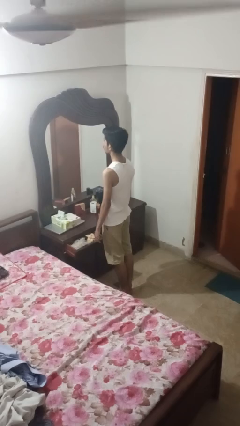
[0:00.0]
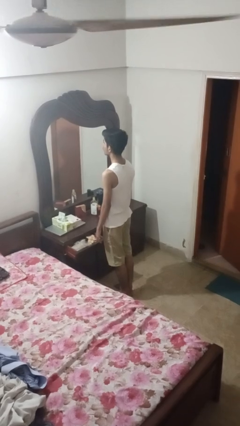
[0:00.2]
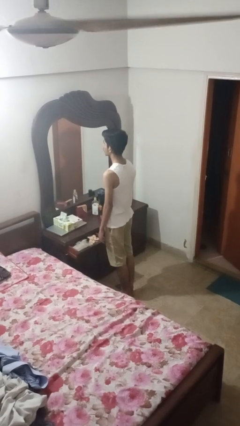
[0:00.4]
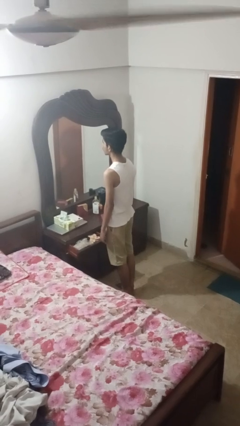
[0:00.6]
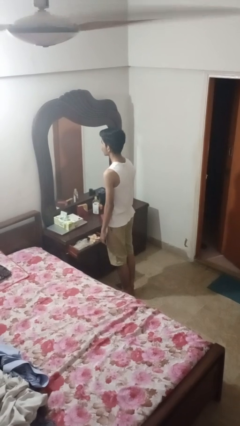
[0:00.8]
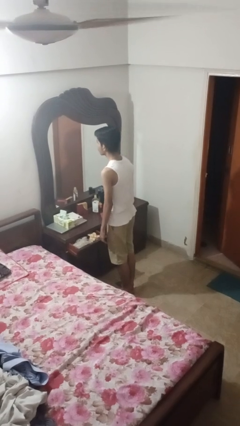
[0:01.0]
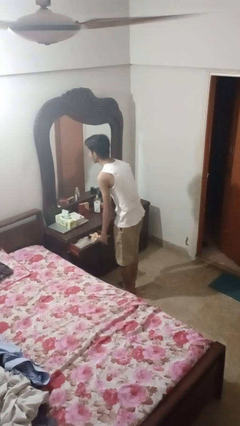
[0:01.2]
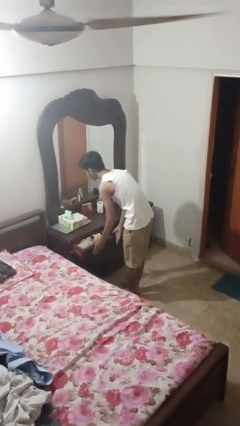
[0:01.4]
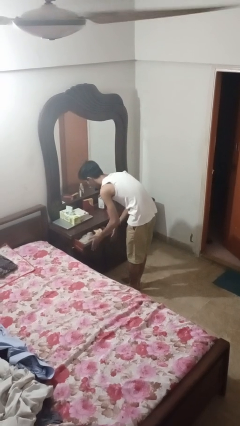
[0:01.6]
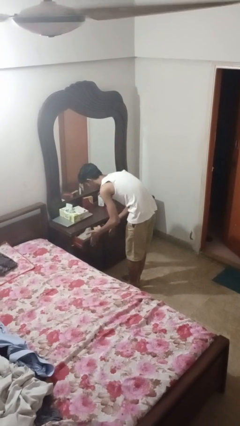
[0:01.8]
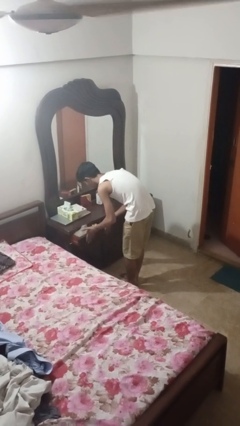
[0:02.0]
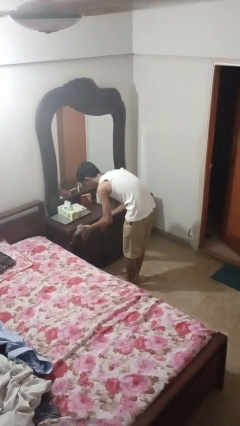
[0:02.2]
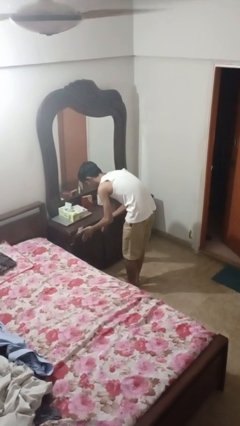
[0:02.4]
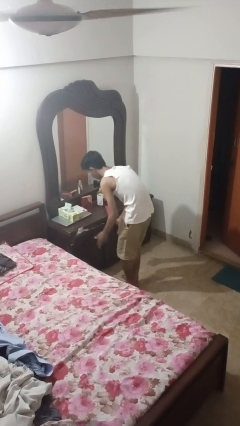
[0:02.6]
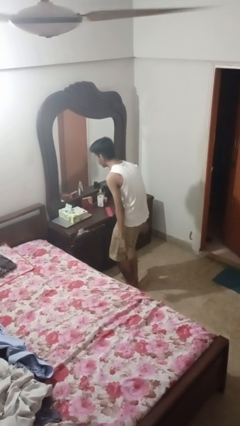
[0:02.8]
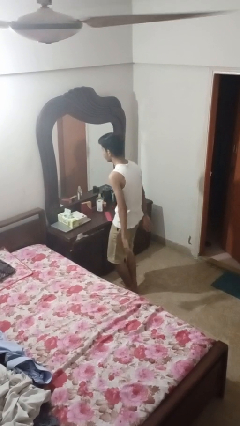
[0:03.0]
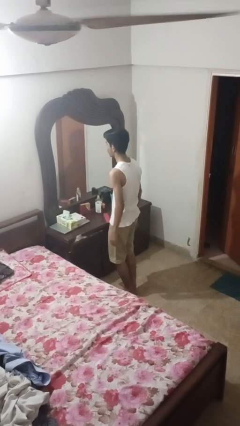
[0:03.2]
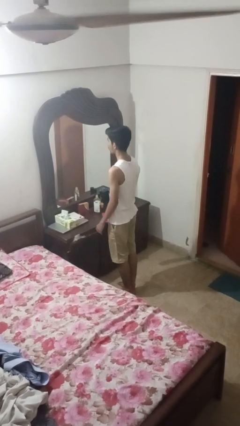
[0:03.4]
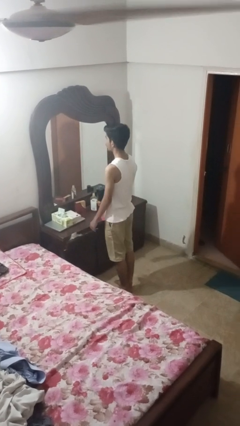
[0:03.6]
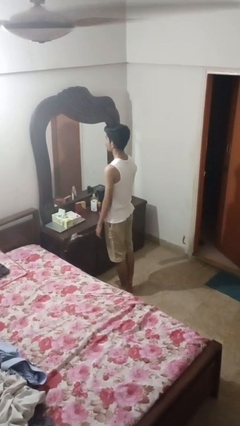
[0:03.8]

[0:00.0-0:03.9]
person closes dresser drawer

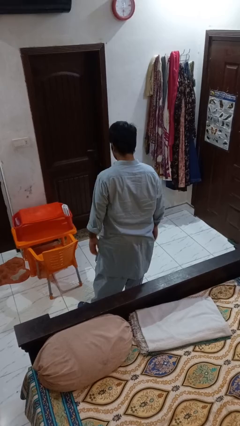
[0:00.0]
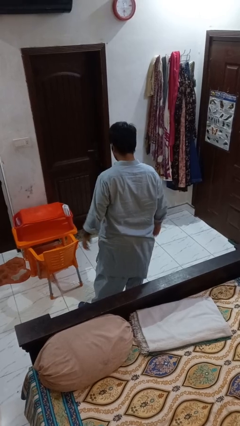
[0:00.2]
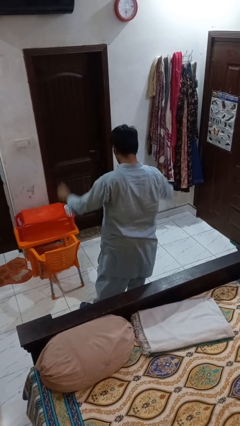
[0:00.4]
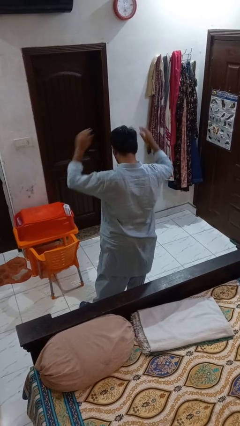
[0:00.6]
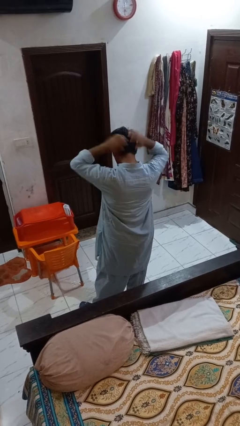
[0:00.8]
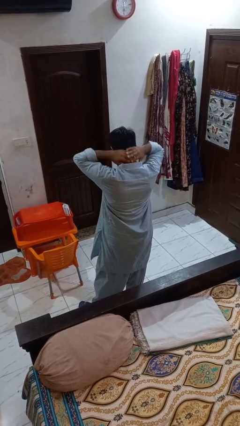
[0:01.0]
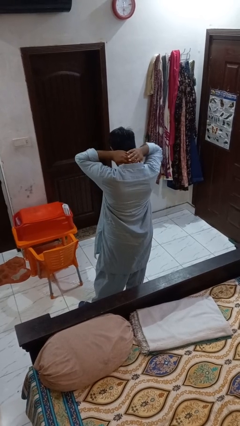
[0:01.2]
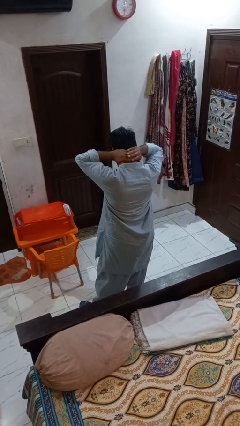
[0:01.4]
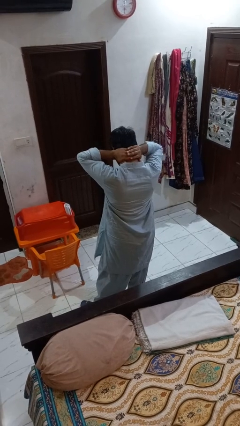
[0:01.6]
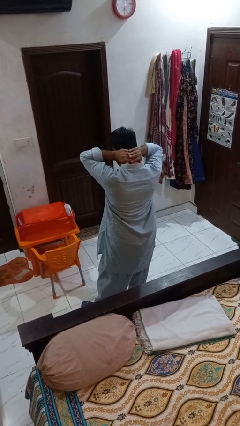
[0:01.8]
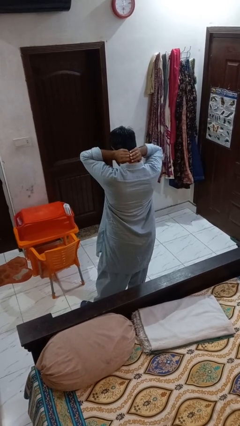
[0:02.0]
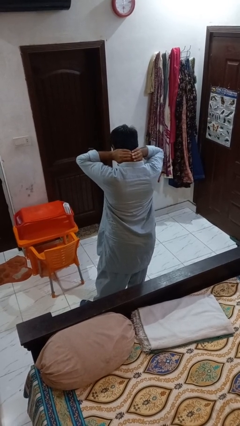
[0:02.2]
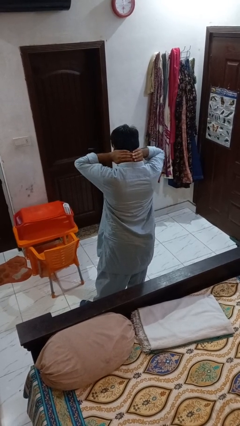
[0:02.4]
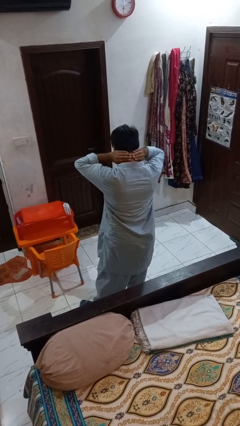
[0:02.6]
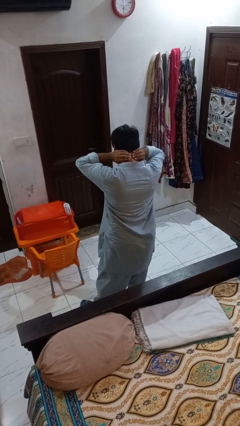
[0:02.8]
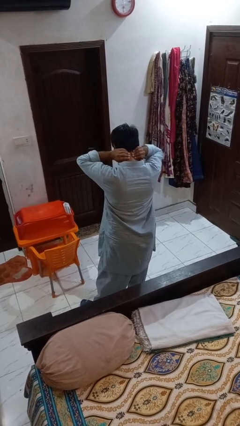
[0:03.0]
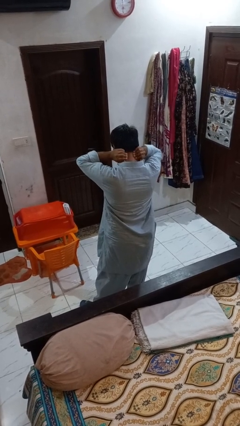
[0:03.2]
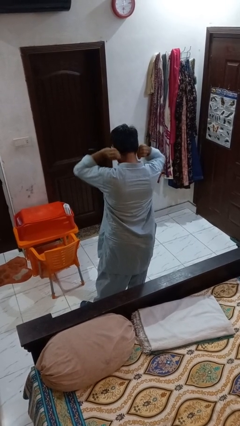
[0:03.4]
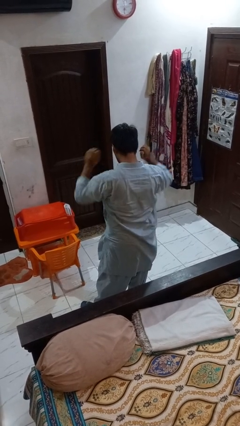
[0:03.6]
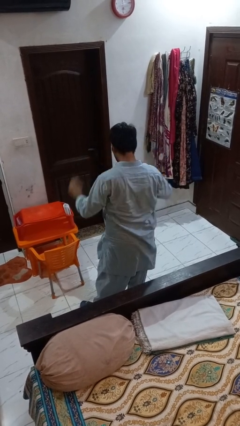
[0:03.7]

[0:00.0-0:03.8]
person rubs neck

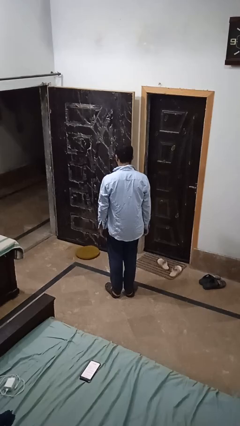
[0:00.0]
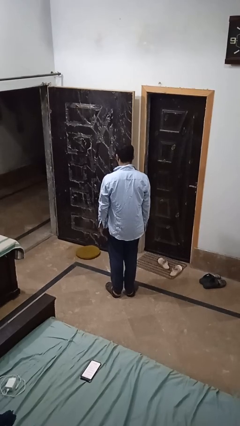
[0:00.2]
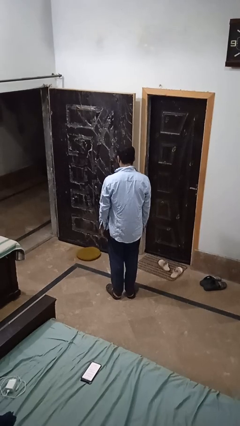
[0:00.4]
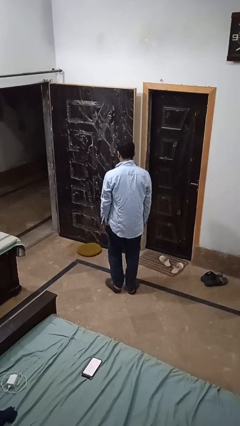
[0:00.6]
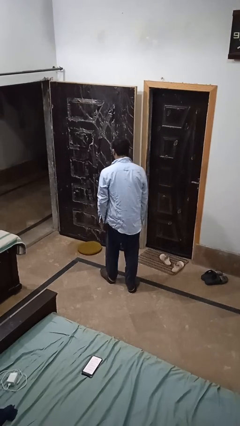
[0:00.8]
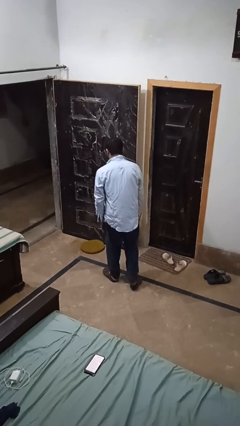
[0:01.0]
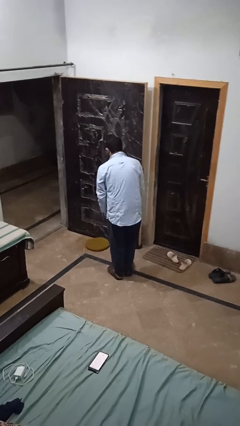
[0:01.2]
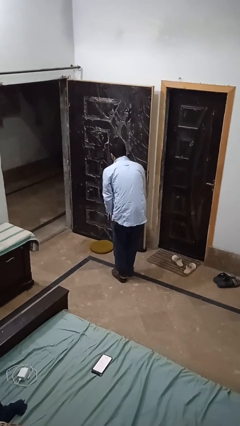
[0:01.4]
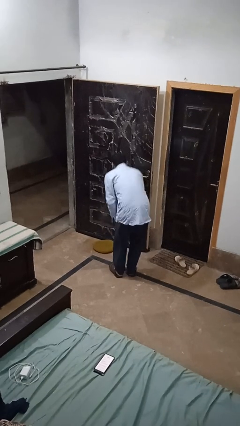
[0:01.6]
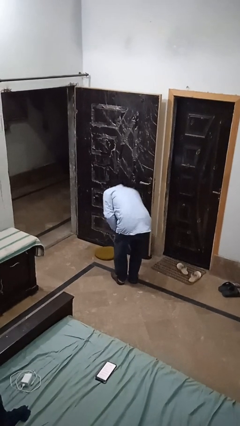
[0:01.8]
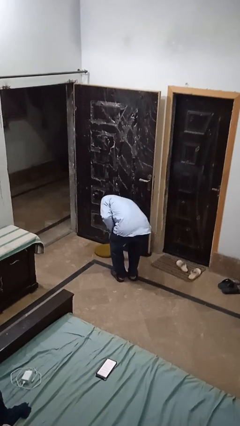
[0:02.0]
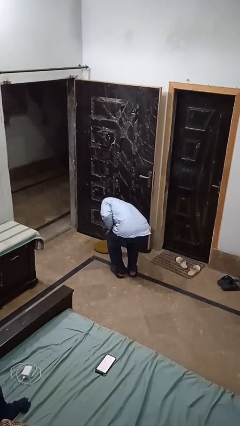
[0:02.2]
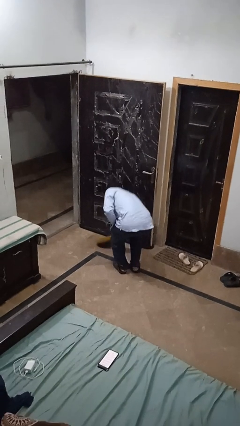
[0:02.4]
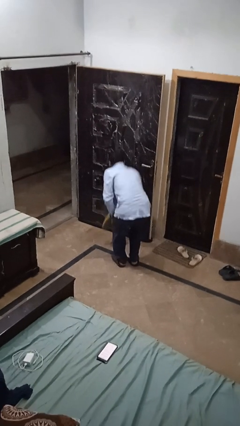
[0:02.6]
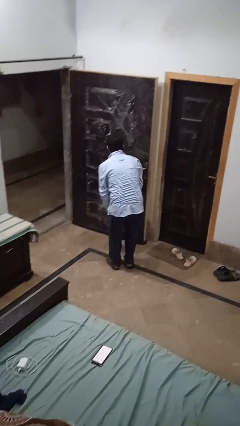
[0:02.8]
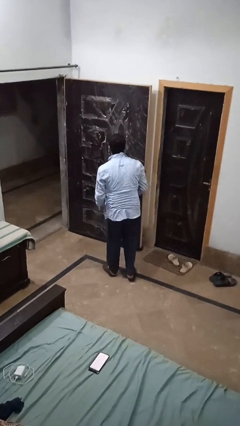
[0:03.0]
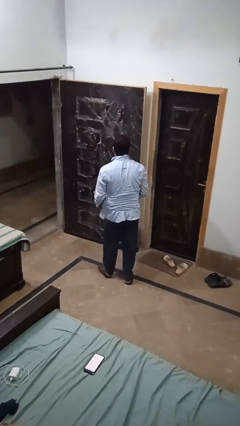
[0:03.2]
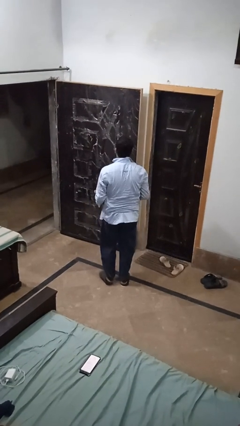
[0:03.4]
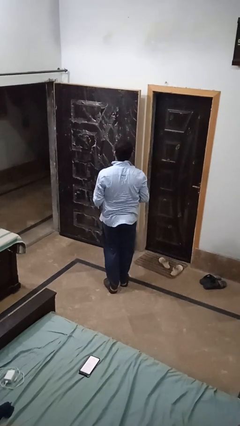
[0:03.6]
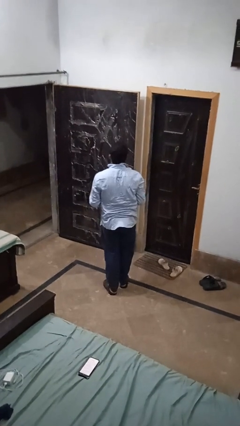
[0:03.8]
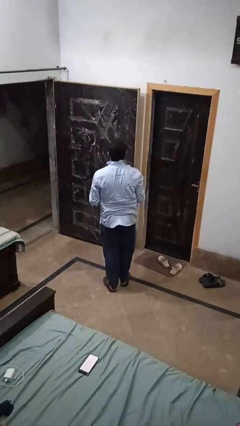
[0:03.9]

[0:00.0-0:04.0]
person picks up object from floor

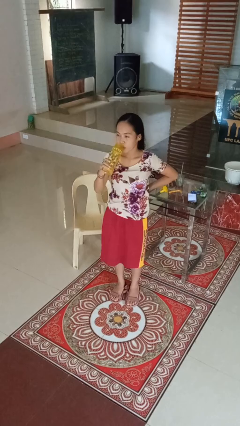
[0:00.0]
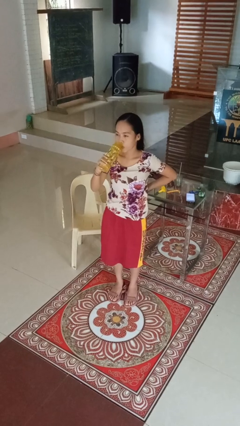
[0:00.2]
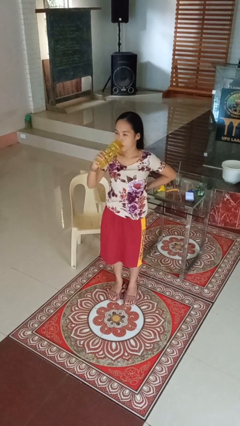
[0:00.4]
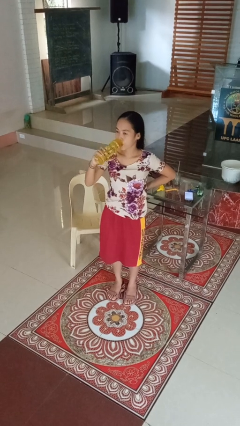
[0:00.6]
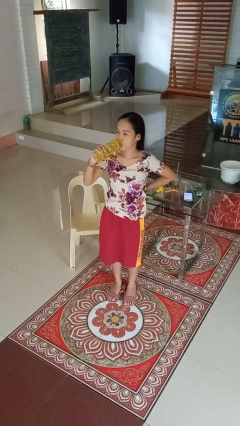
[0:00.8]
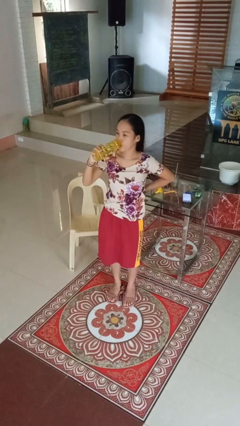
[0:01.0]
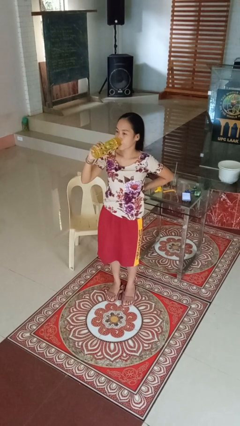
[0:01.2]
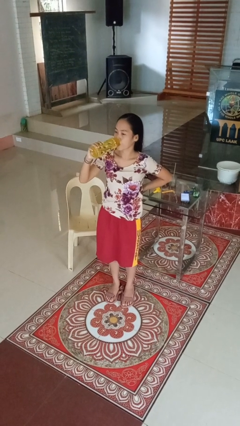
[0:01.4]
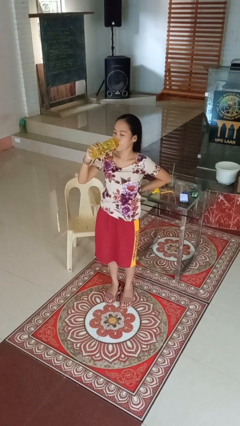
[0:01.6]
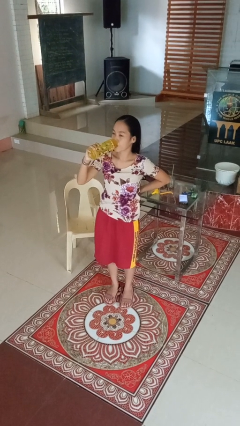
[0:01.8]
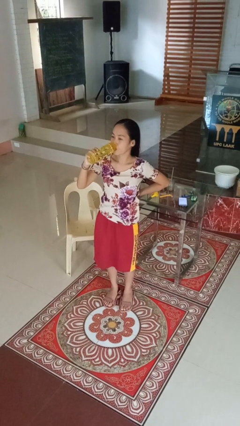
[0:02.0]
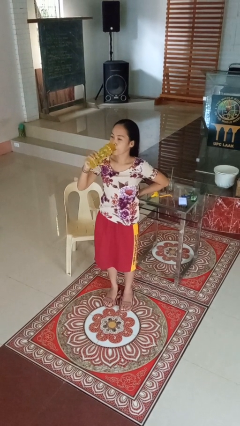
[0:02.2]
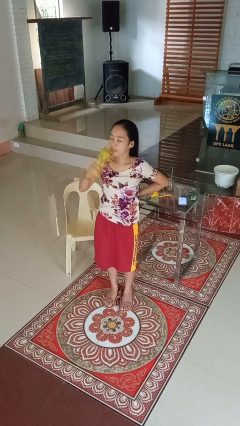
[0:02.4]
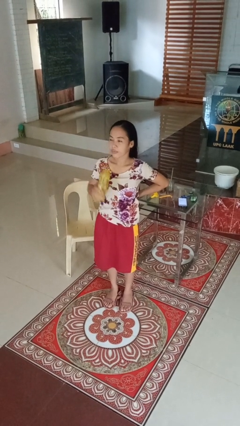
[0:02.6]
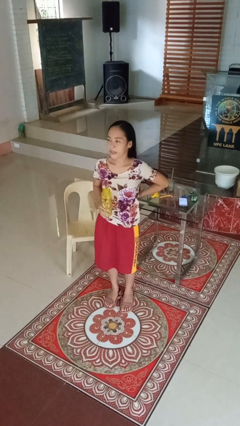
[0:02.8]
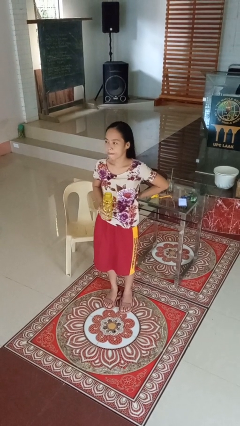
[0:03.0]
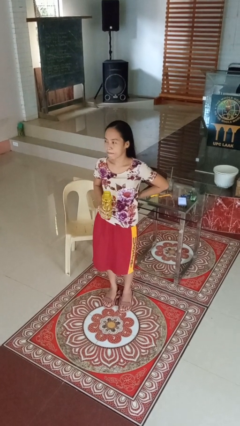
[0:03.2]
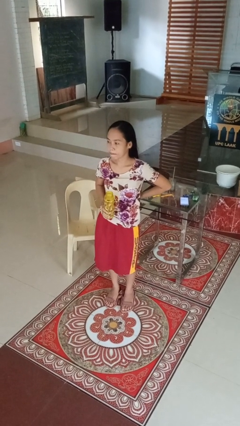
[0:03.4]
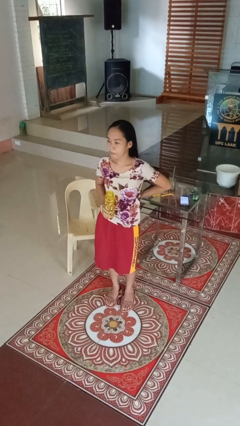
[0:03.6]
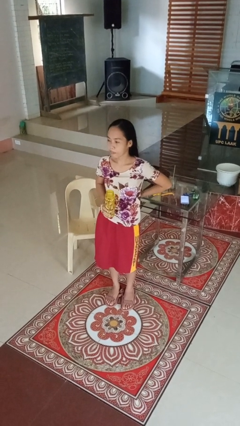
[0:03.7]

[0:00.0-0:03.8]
person drinks from bottle

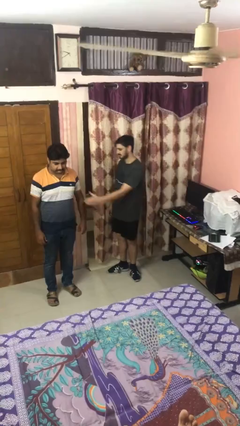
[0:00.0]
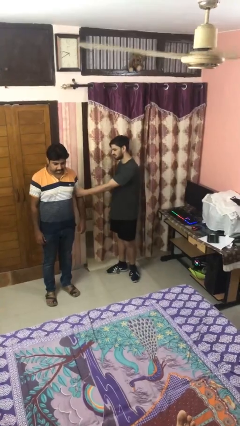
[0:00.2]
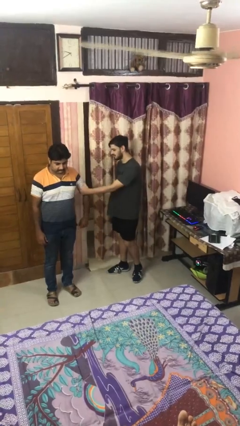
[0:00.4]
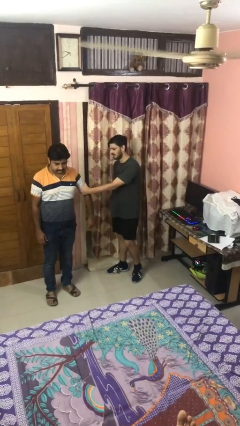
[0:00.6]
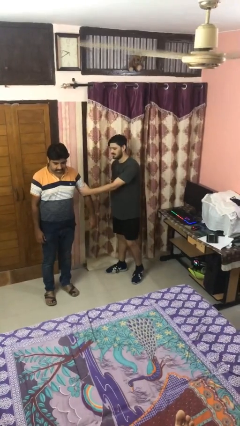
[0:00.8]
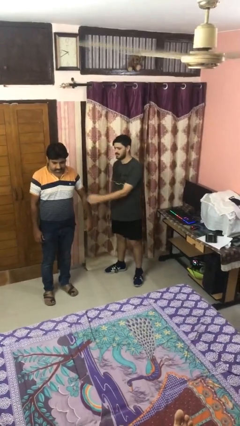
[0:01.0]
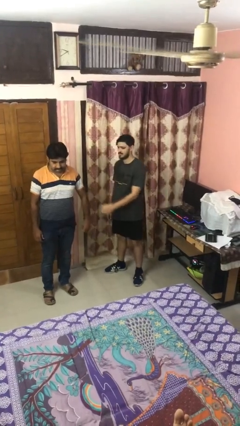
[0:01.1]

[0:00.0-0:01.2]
person grabs person by bicep

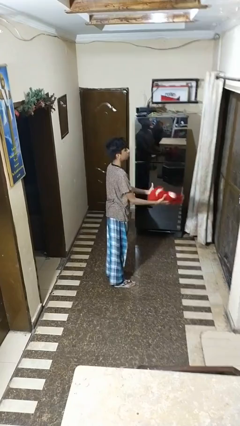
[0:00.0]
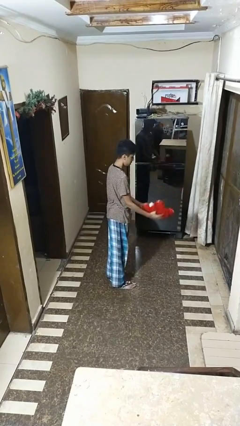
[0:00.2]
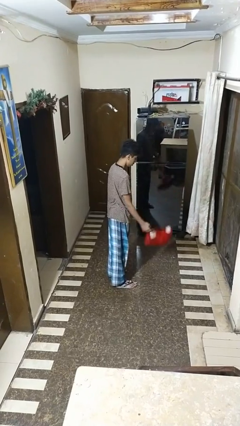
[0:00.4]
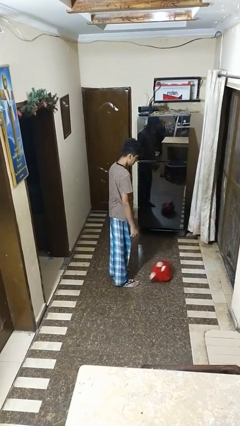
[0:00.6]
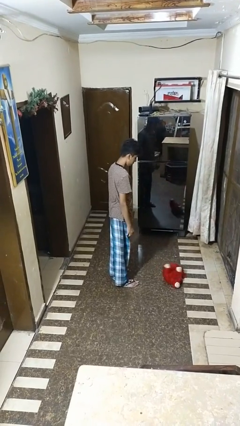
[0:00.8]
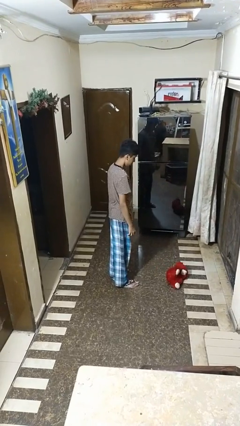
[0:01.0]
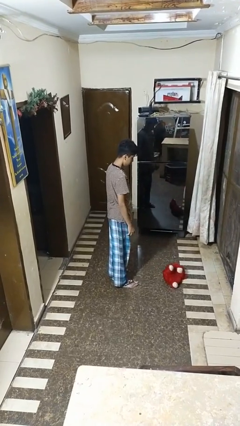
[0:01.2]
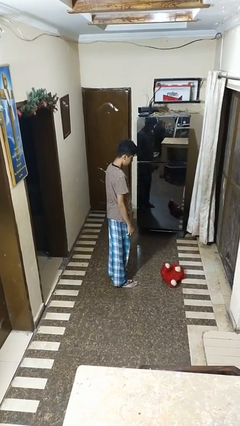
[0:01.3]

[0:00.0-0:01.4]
person catches dropped object
